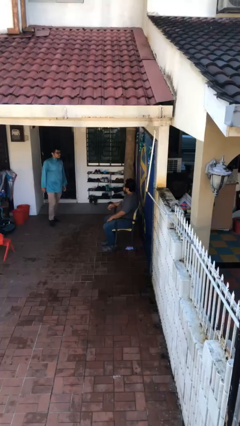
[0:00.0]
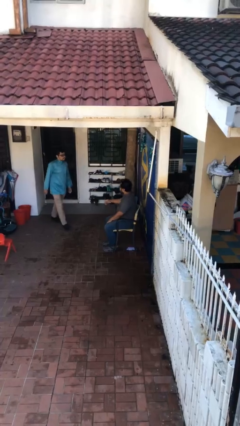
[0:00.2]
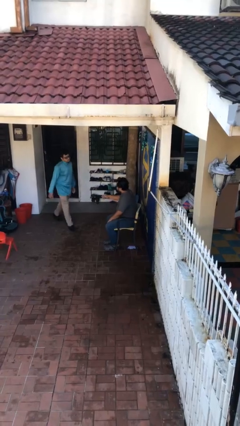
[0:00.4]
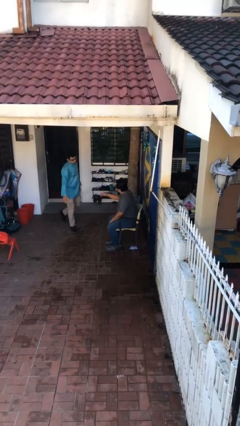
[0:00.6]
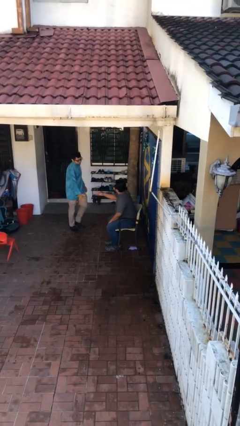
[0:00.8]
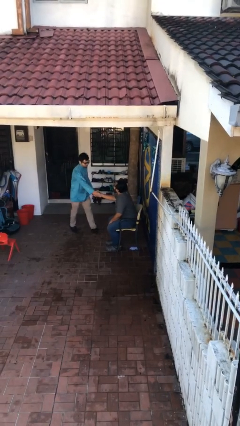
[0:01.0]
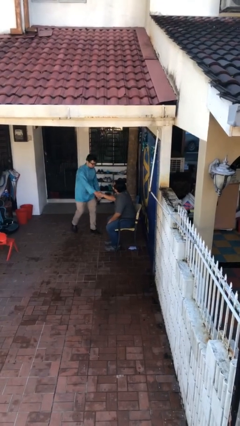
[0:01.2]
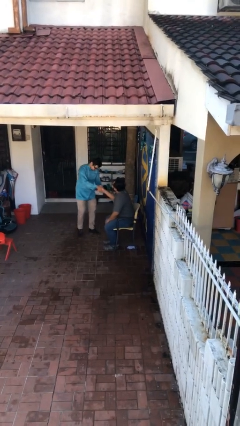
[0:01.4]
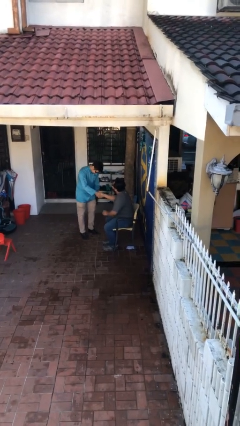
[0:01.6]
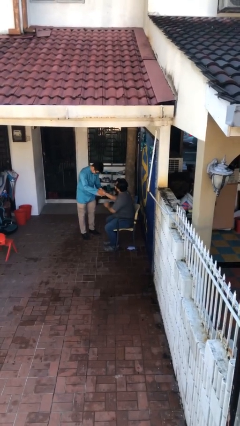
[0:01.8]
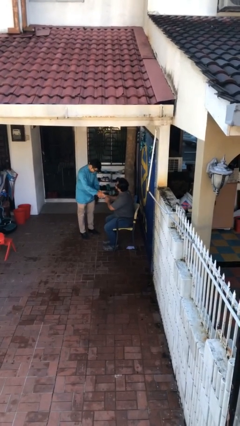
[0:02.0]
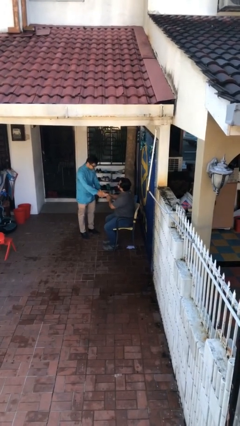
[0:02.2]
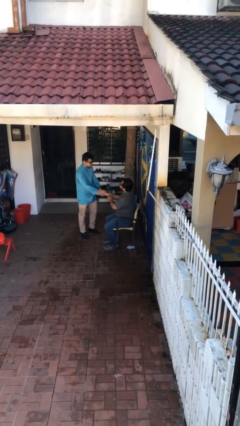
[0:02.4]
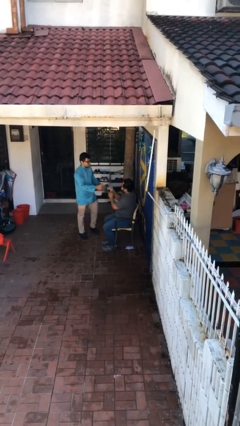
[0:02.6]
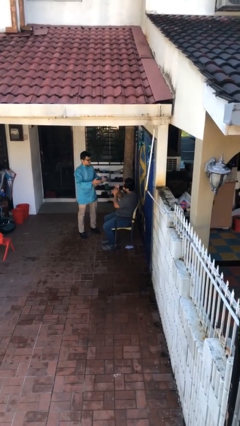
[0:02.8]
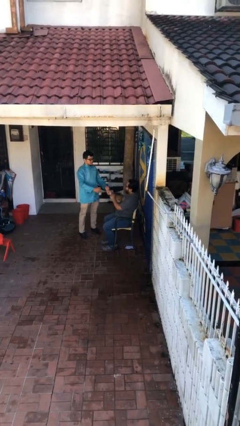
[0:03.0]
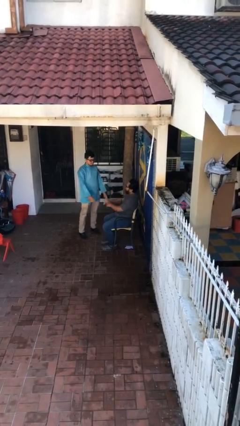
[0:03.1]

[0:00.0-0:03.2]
person shakes hand

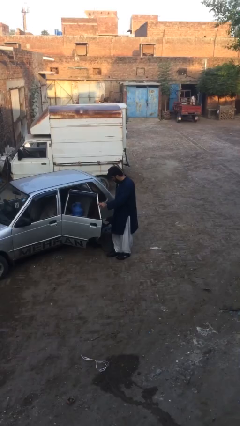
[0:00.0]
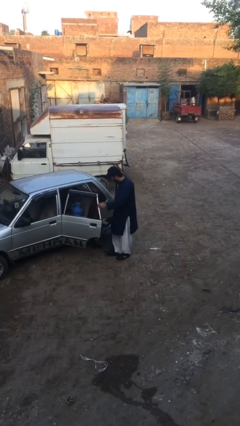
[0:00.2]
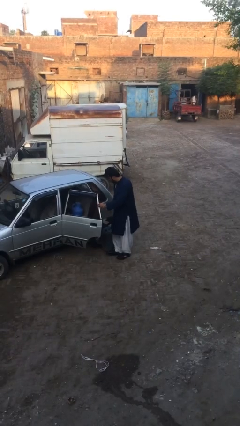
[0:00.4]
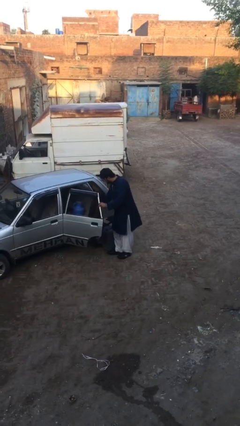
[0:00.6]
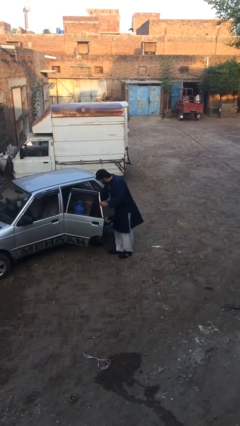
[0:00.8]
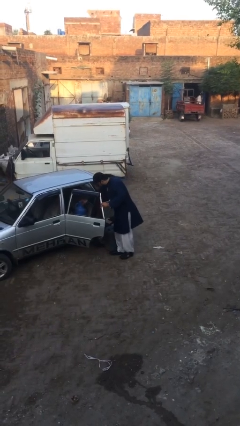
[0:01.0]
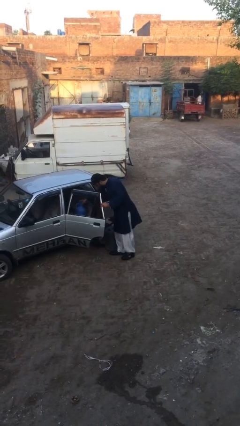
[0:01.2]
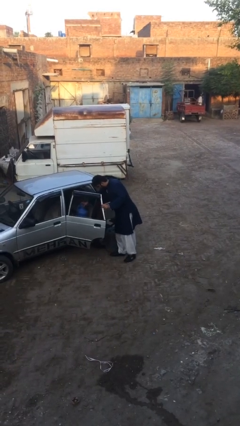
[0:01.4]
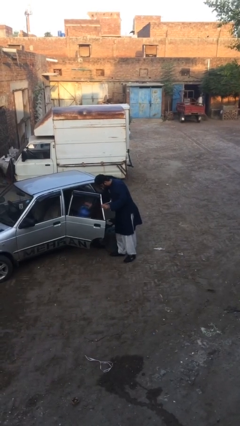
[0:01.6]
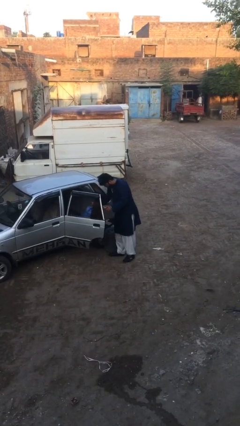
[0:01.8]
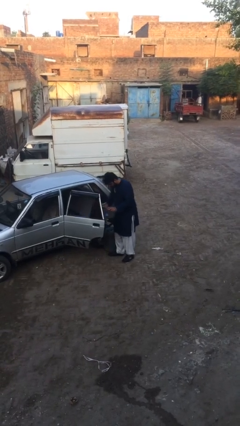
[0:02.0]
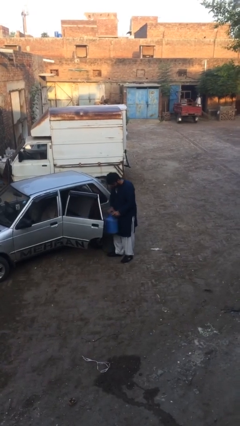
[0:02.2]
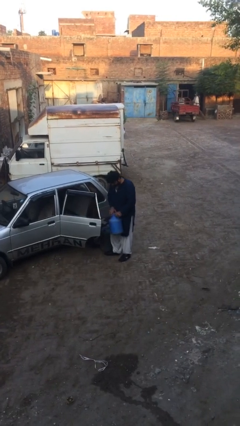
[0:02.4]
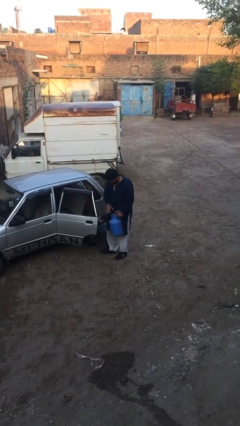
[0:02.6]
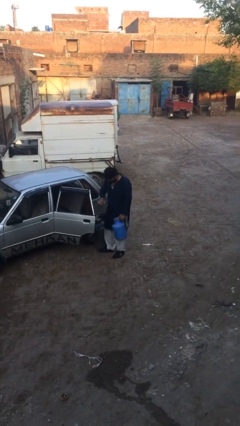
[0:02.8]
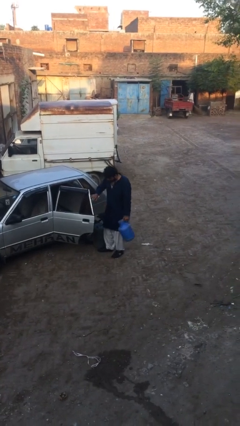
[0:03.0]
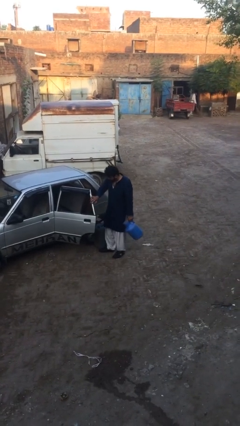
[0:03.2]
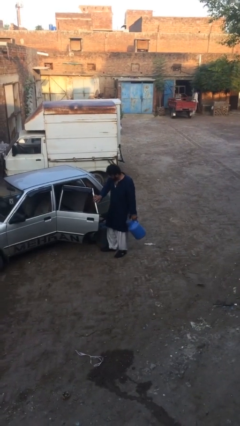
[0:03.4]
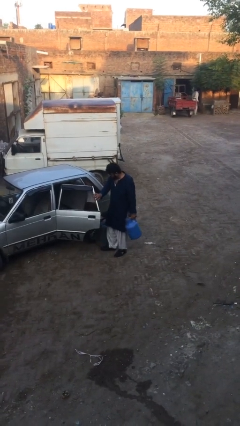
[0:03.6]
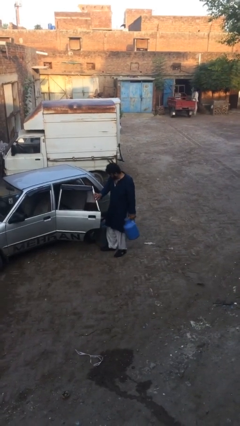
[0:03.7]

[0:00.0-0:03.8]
person unloads car

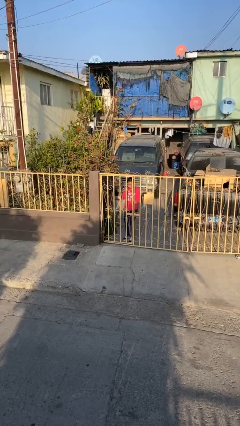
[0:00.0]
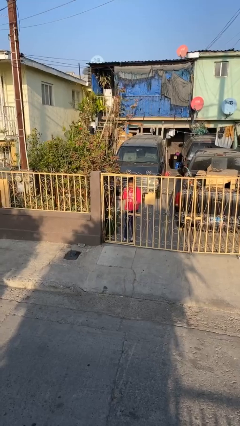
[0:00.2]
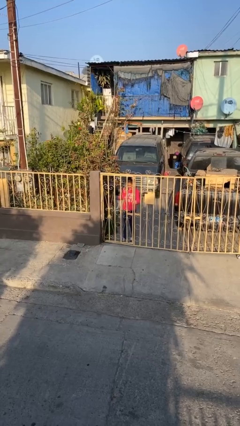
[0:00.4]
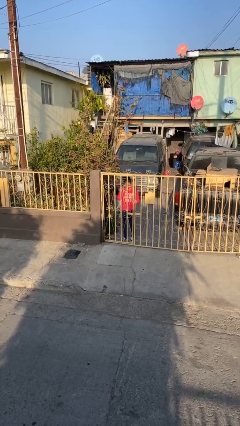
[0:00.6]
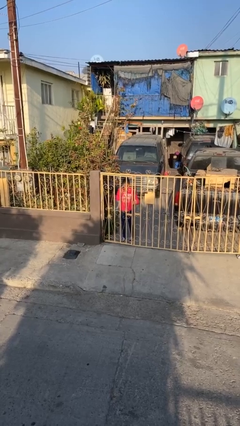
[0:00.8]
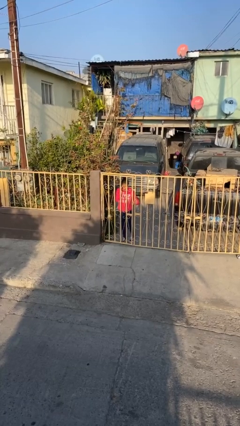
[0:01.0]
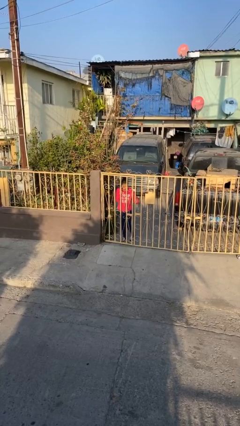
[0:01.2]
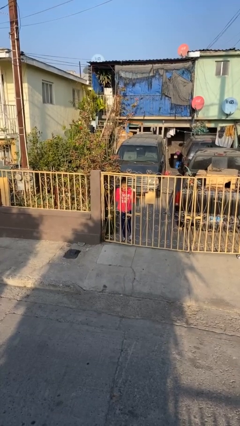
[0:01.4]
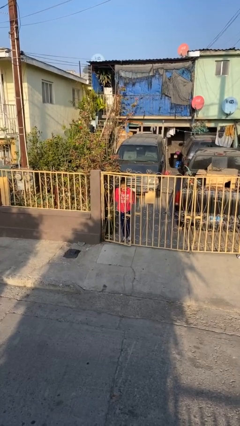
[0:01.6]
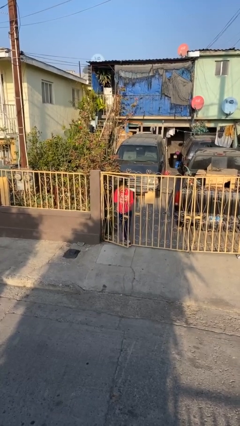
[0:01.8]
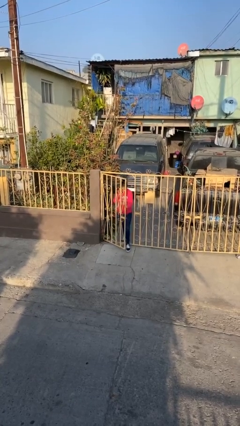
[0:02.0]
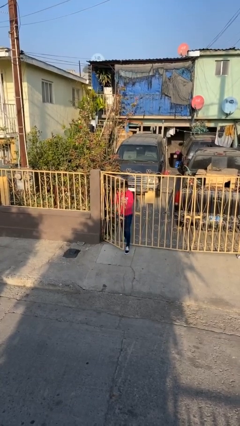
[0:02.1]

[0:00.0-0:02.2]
person opens facility door

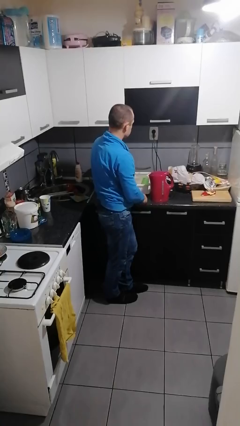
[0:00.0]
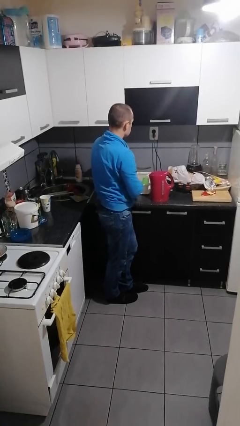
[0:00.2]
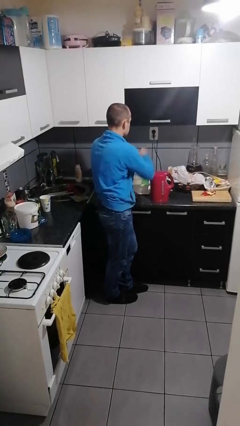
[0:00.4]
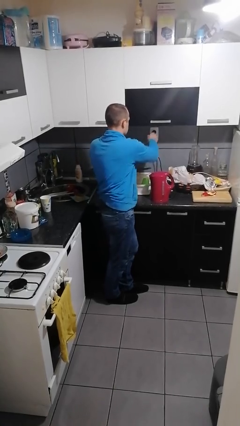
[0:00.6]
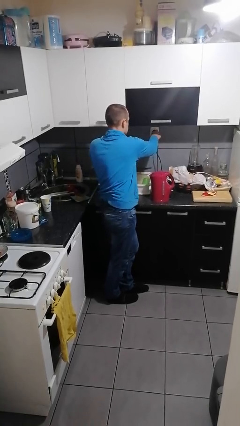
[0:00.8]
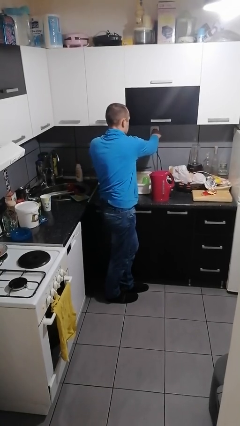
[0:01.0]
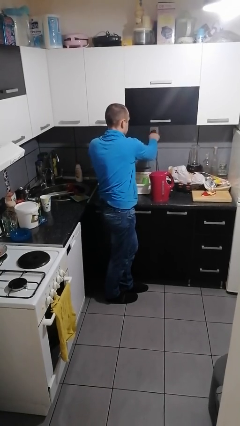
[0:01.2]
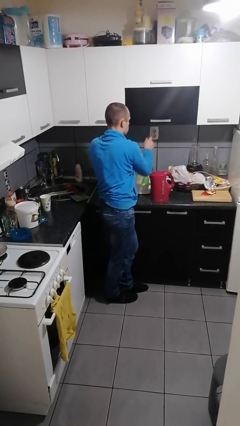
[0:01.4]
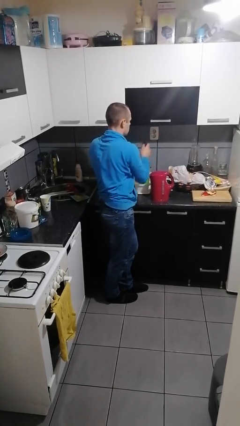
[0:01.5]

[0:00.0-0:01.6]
person unplugs from electrical socket

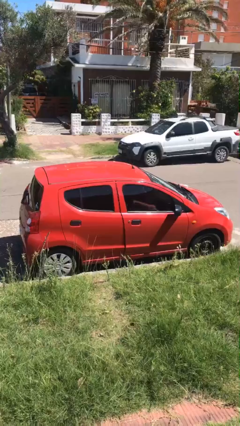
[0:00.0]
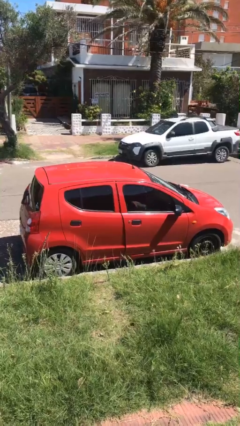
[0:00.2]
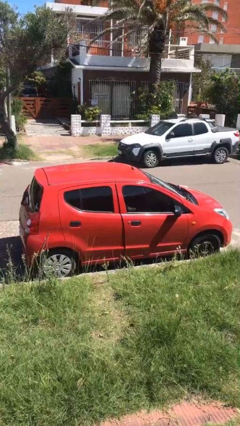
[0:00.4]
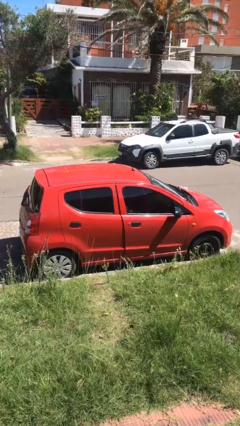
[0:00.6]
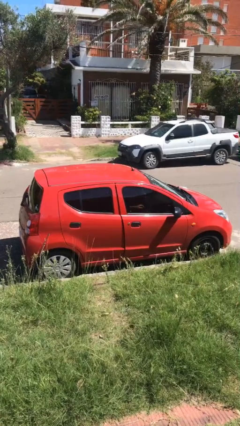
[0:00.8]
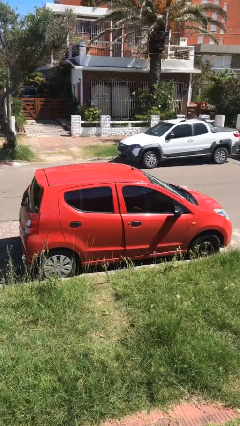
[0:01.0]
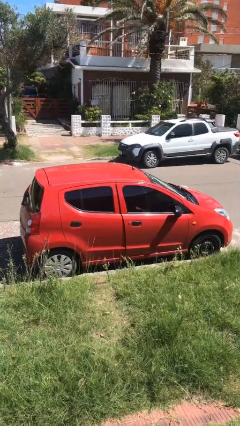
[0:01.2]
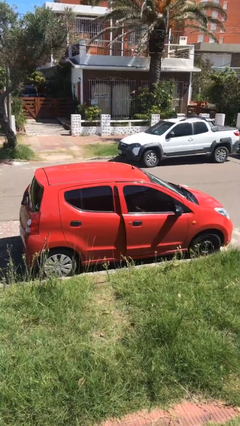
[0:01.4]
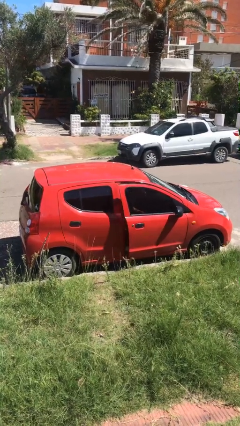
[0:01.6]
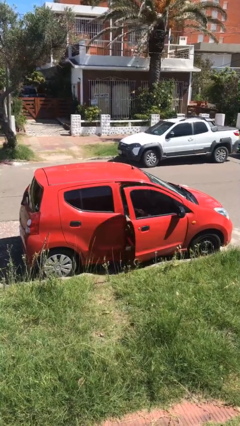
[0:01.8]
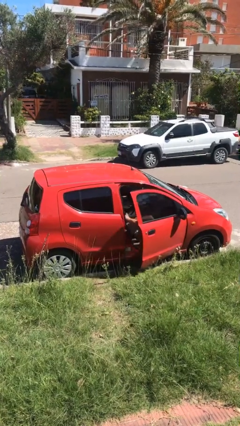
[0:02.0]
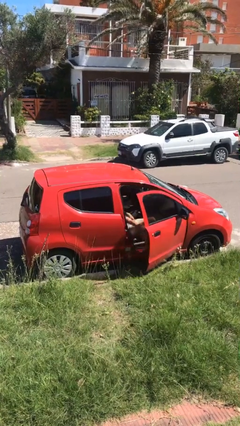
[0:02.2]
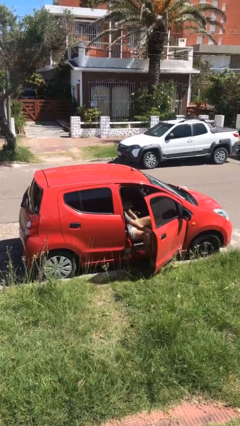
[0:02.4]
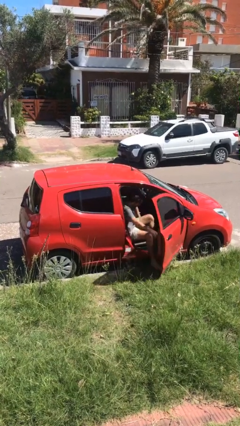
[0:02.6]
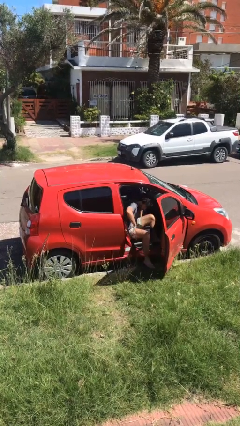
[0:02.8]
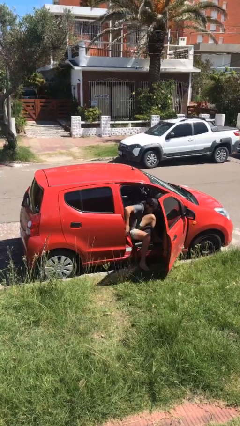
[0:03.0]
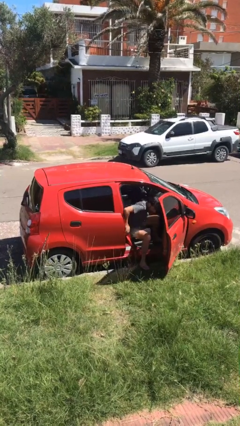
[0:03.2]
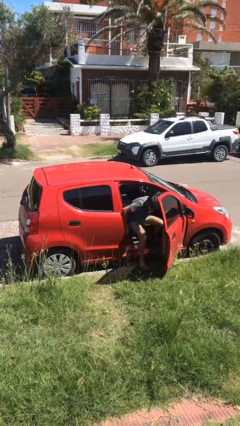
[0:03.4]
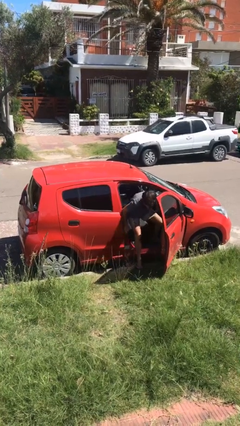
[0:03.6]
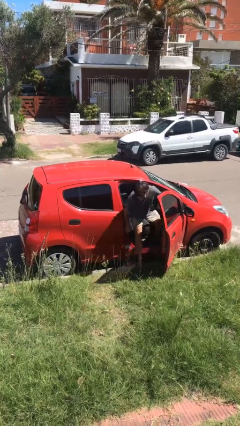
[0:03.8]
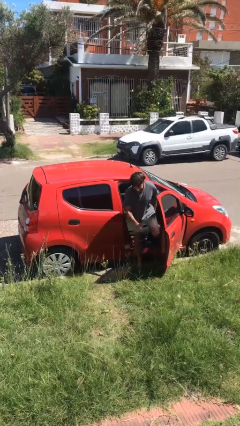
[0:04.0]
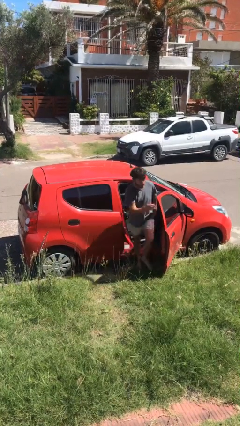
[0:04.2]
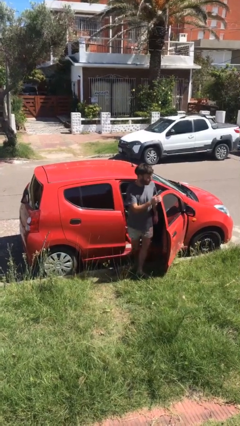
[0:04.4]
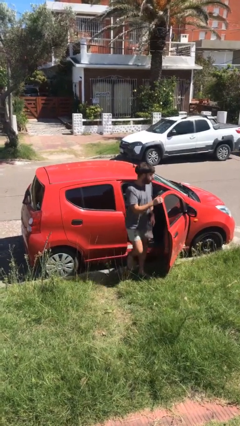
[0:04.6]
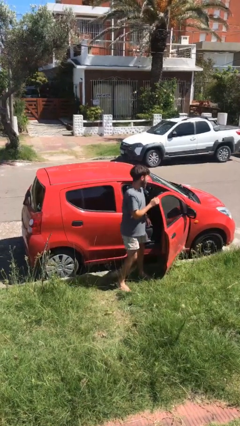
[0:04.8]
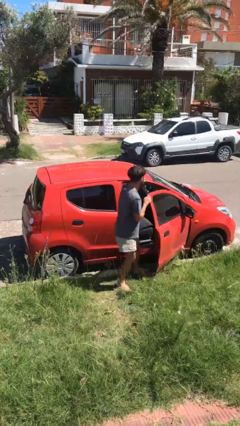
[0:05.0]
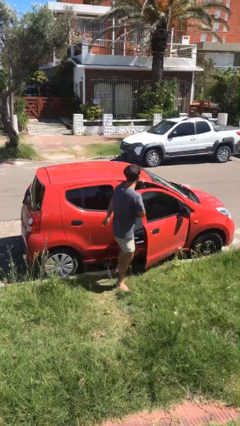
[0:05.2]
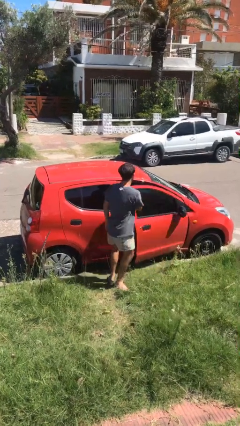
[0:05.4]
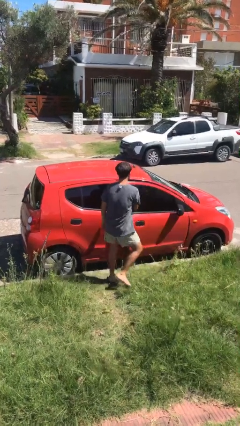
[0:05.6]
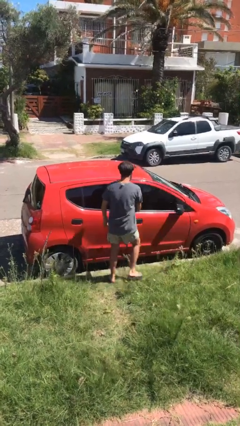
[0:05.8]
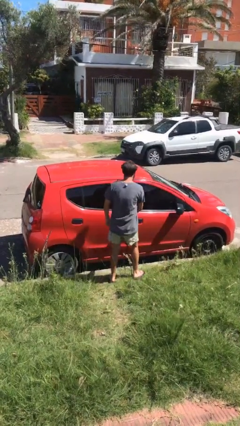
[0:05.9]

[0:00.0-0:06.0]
car drops off person

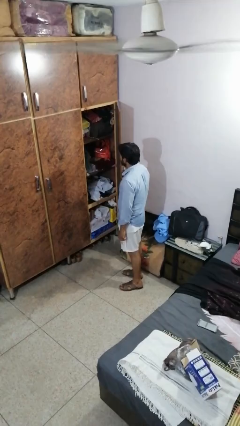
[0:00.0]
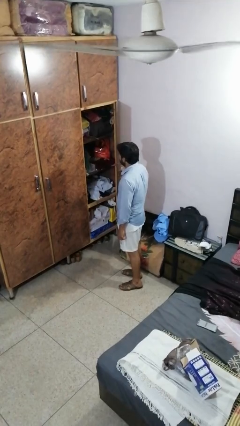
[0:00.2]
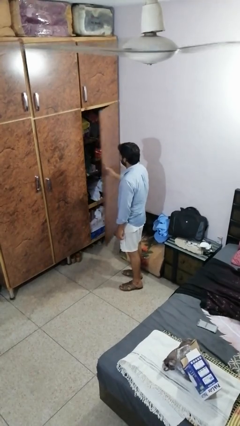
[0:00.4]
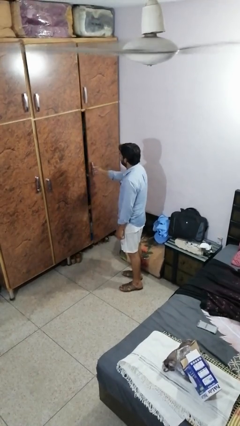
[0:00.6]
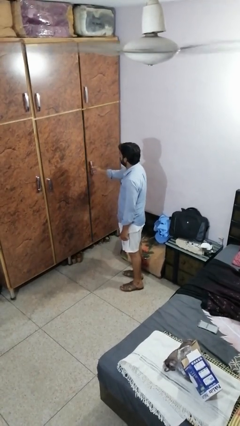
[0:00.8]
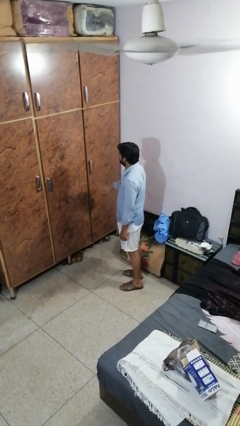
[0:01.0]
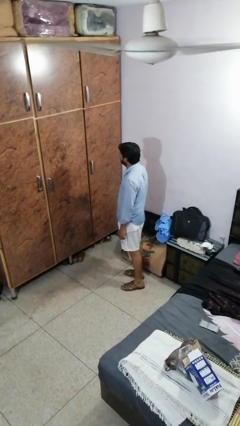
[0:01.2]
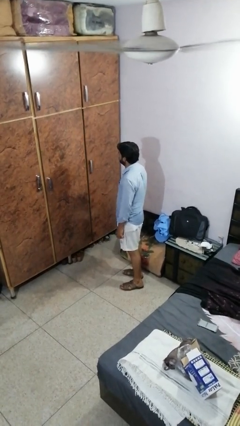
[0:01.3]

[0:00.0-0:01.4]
person closes closet door
